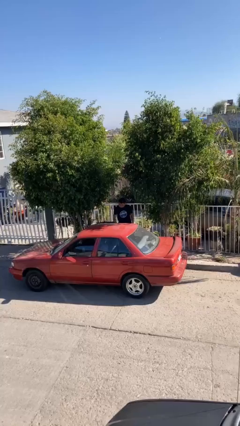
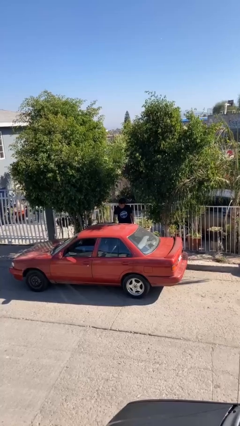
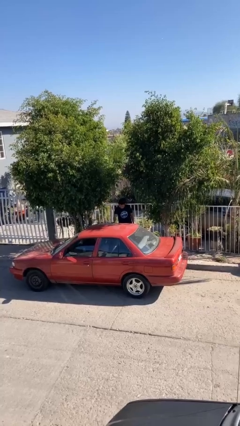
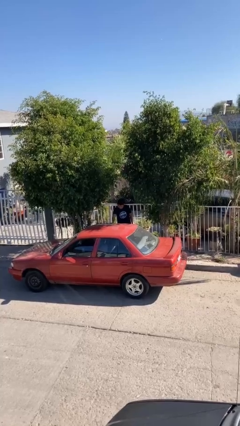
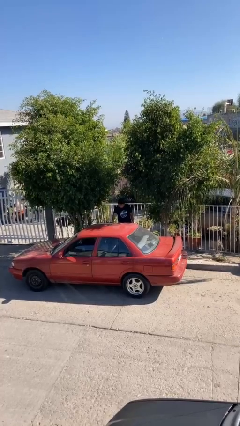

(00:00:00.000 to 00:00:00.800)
person closes car door

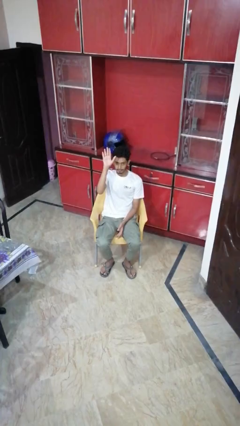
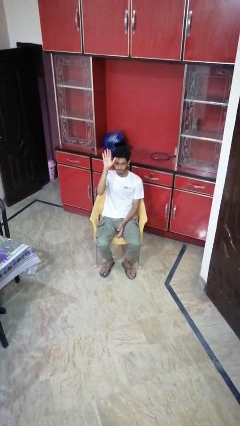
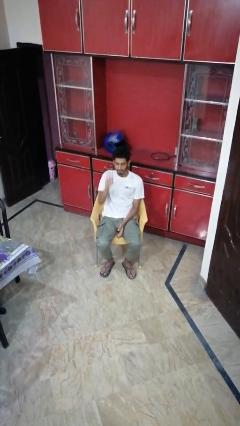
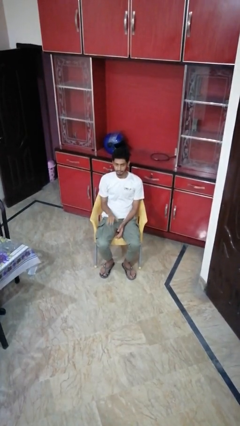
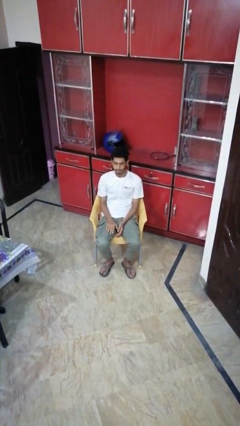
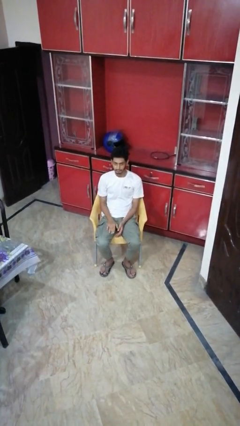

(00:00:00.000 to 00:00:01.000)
person gestures lower hand

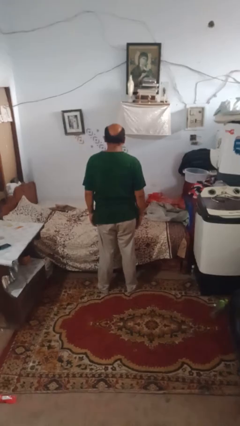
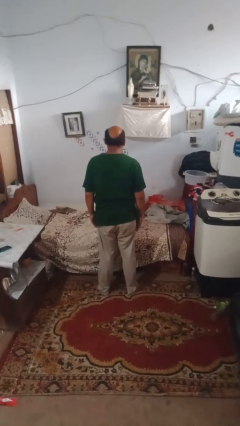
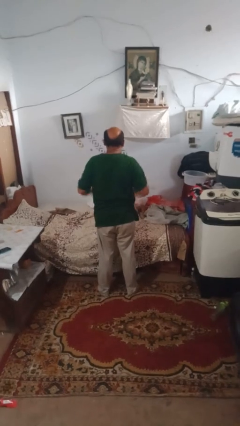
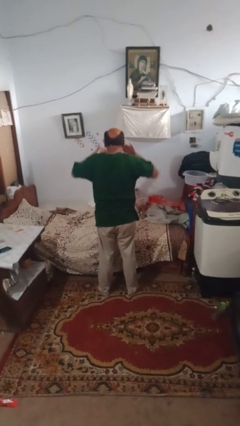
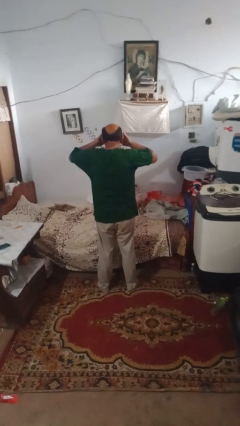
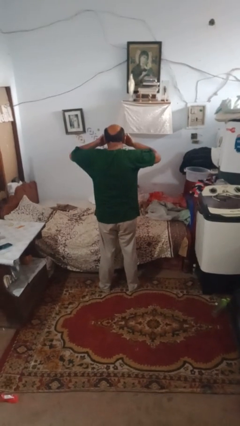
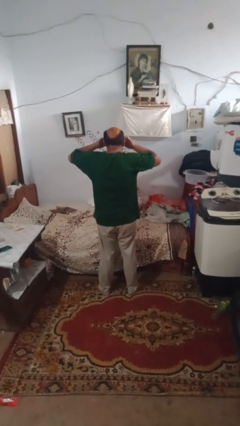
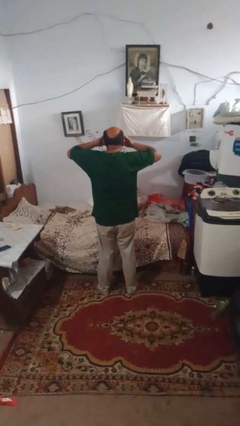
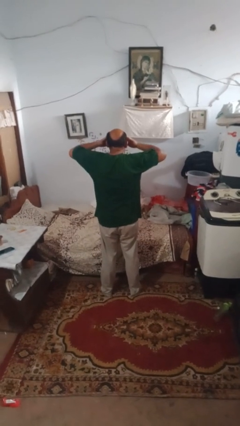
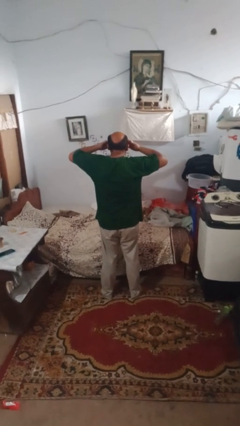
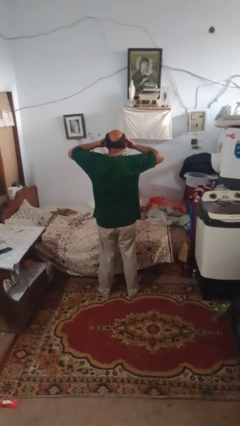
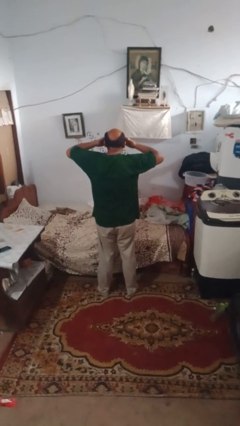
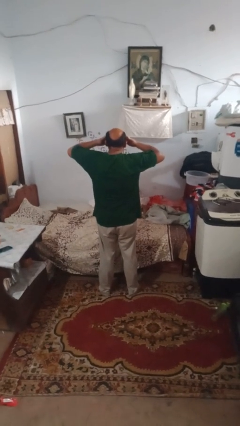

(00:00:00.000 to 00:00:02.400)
person rubs eyes

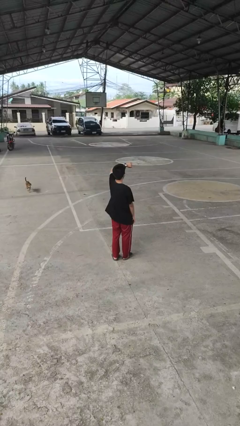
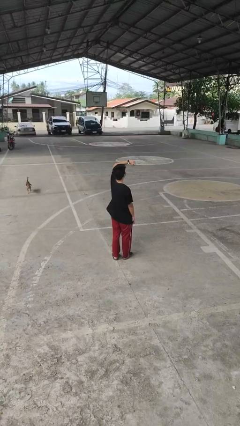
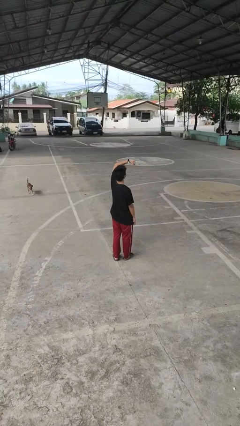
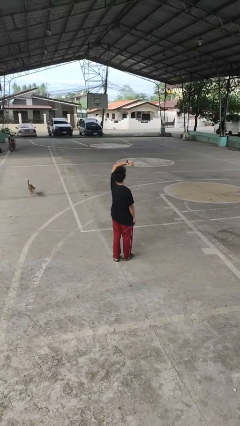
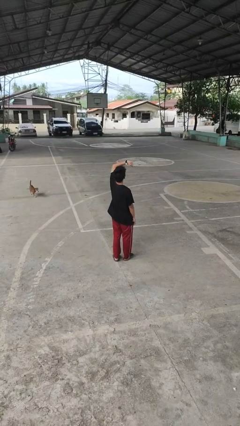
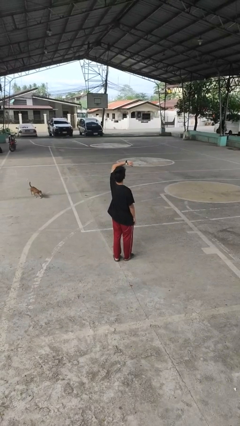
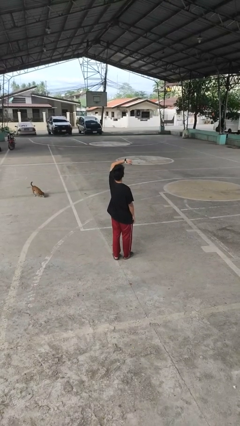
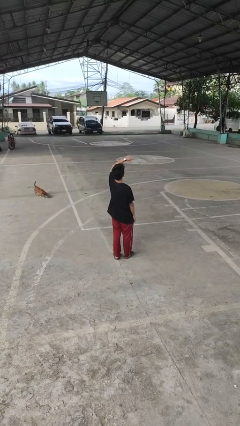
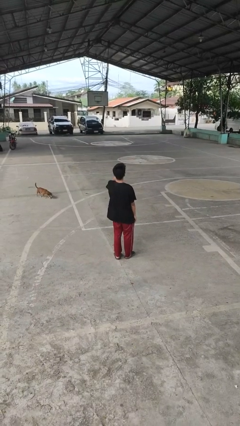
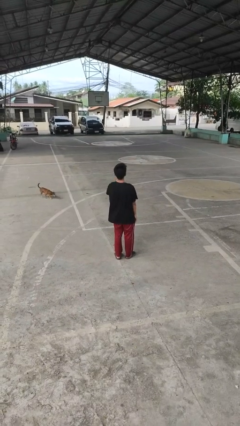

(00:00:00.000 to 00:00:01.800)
person looks at wristwatch

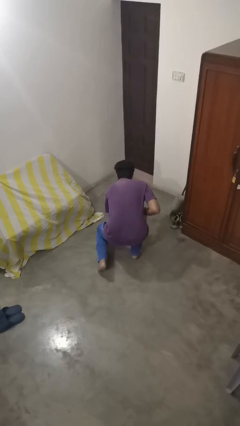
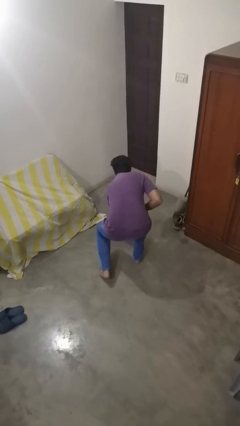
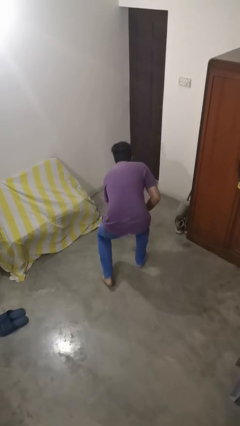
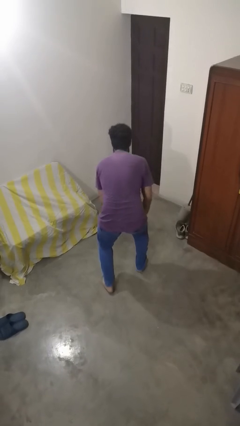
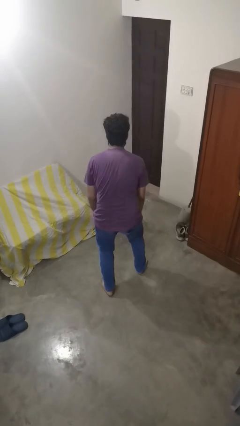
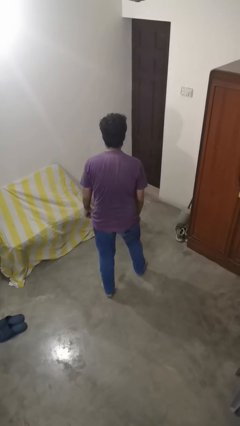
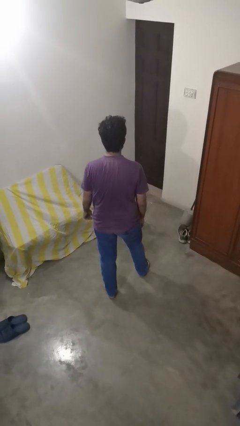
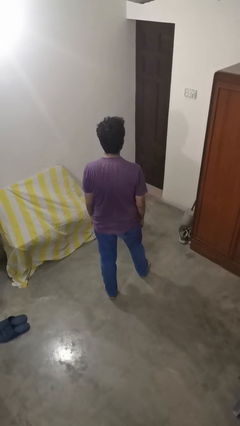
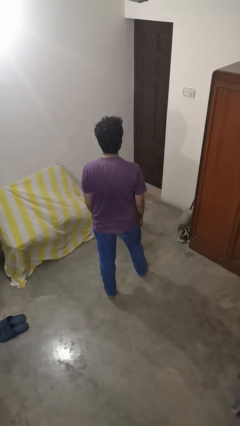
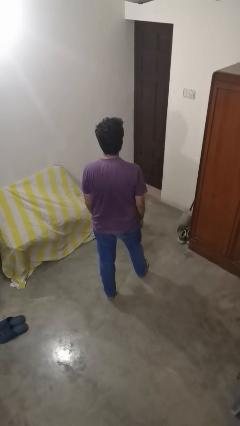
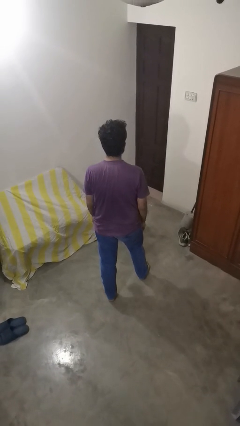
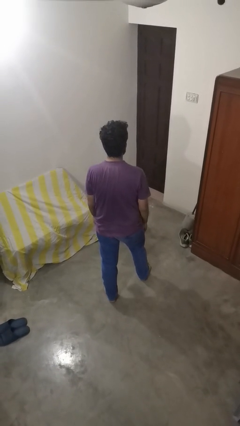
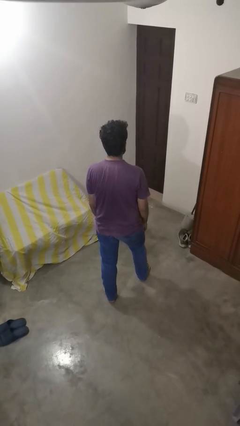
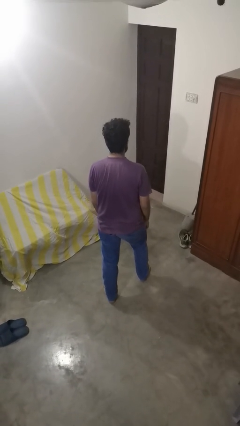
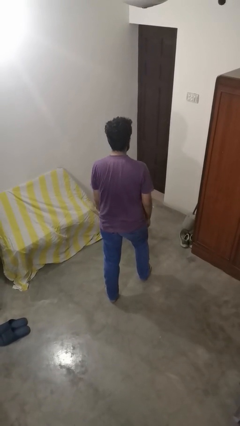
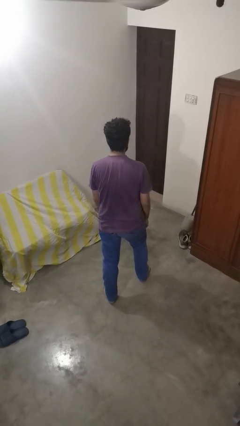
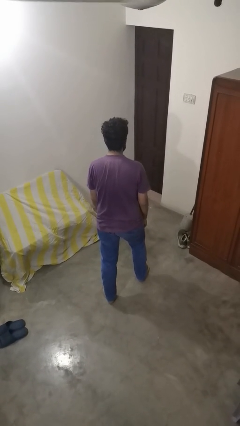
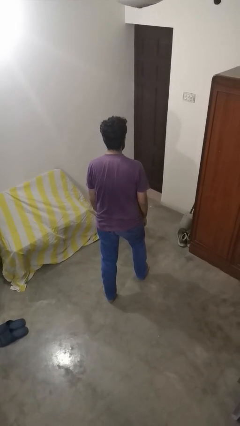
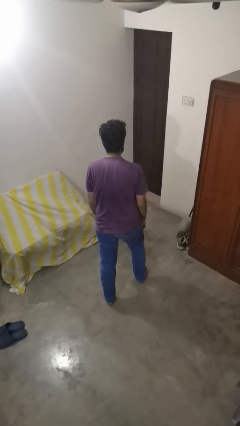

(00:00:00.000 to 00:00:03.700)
person stands up from floor

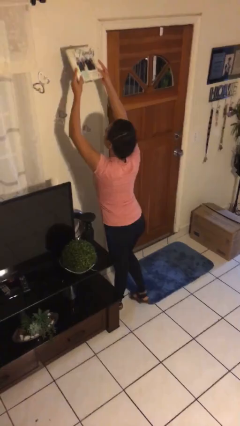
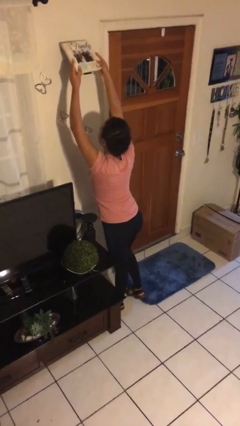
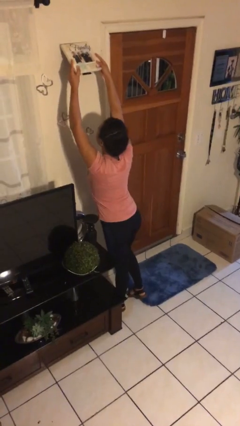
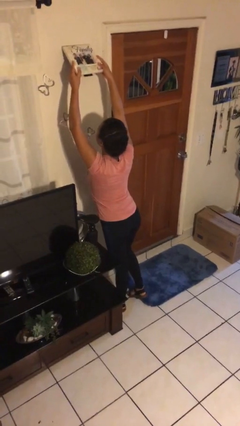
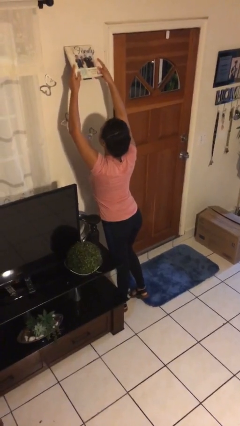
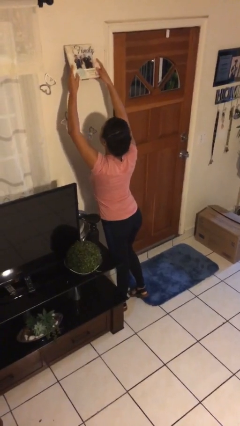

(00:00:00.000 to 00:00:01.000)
person puts up picture frame

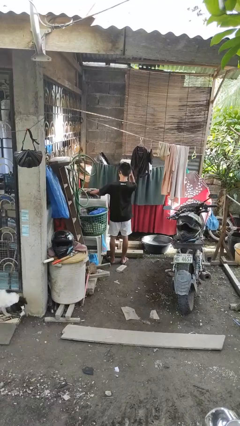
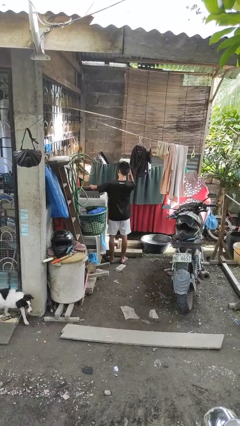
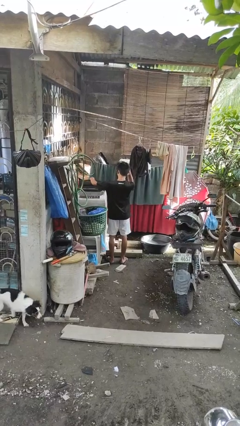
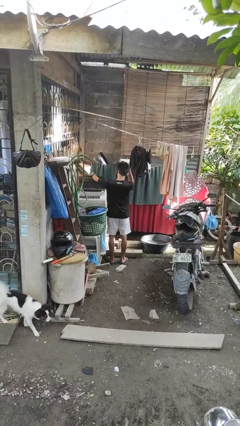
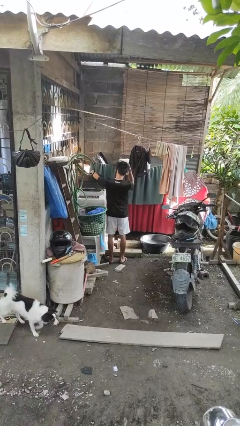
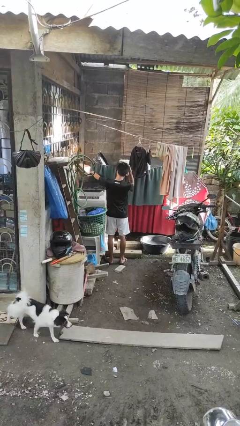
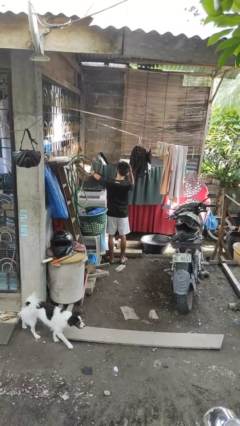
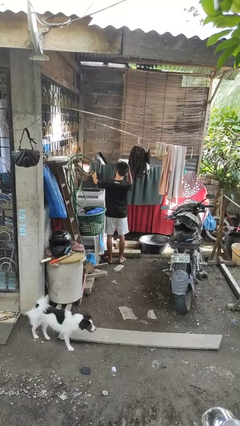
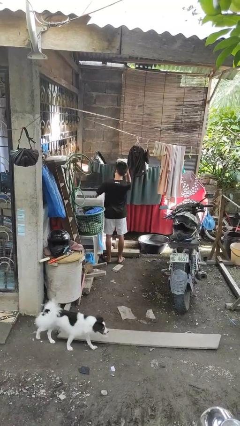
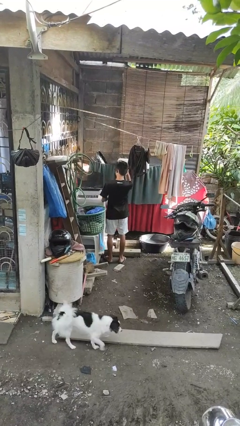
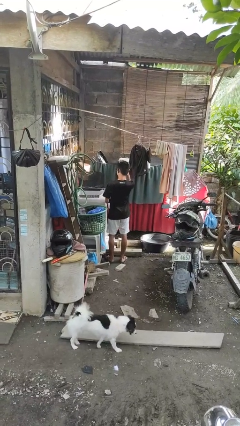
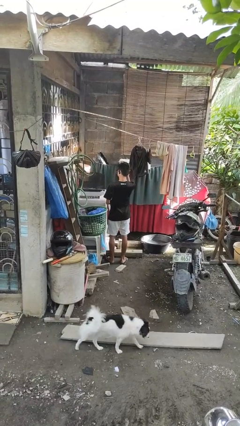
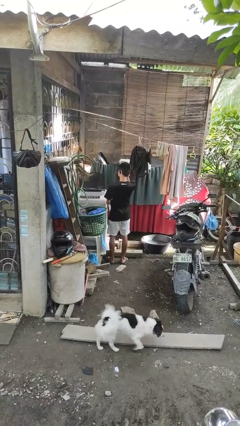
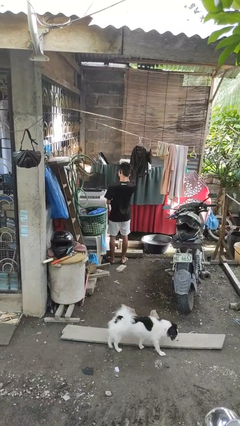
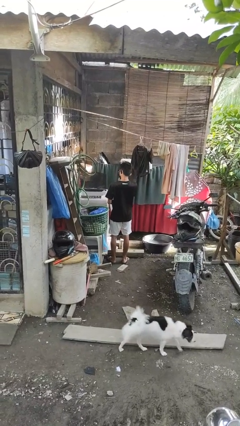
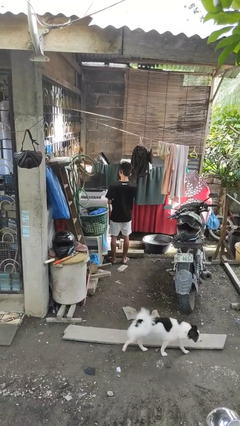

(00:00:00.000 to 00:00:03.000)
person opens clothes washer

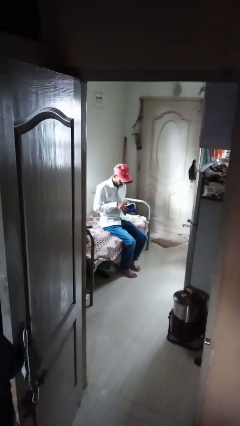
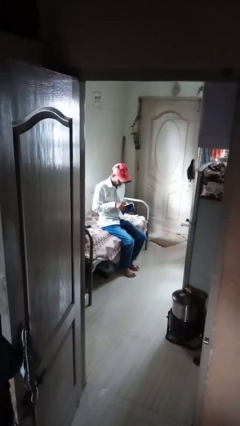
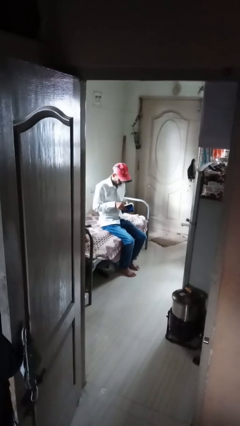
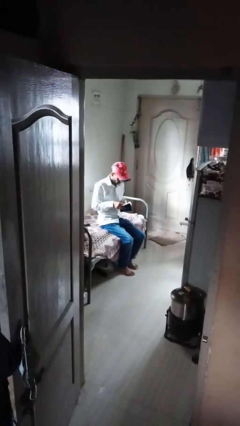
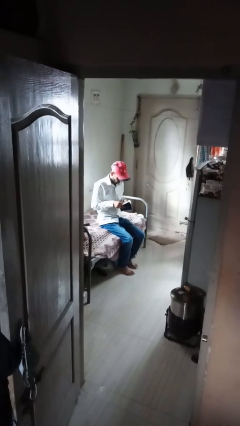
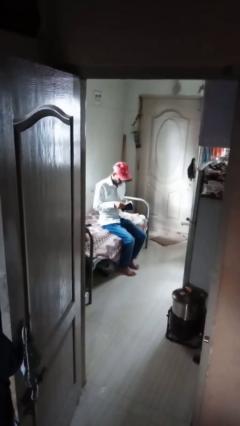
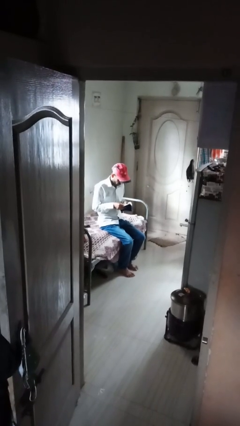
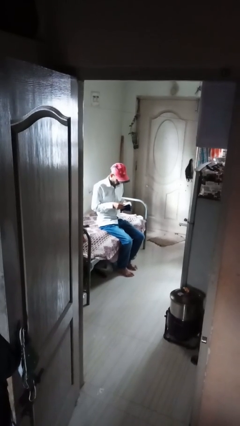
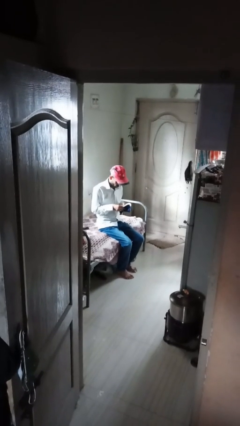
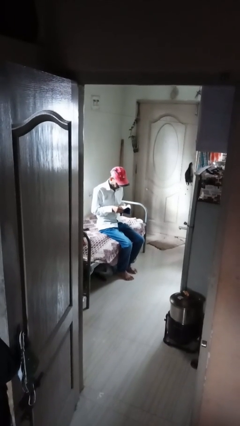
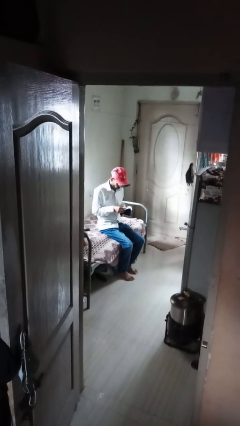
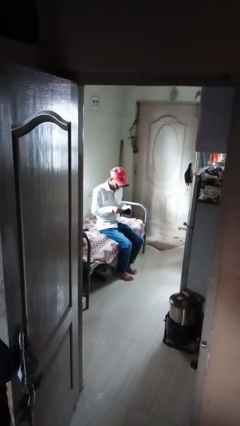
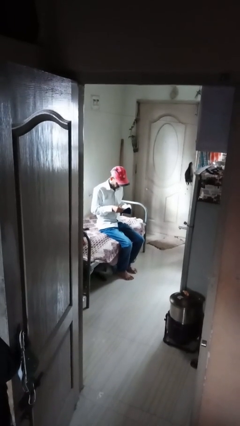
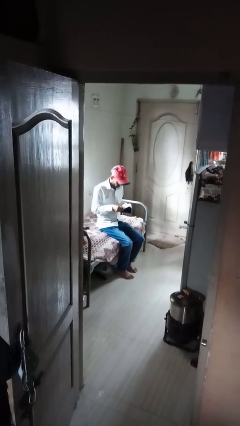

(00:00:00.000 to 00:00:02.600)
person searches in purse

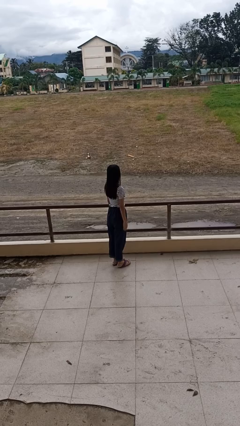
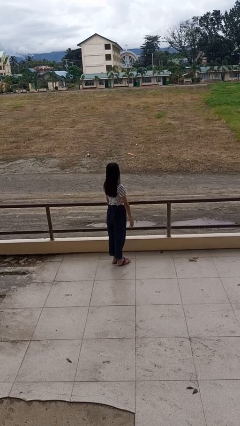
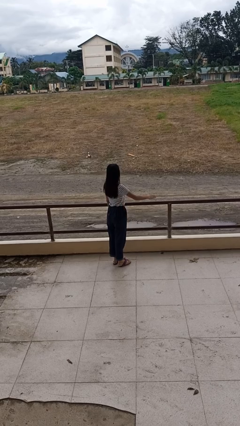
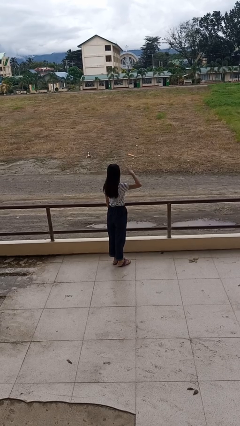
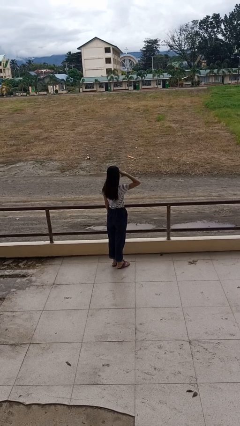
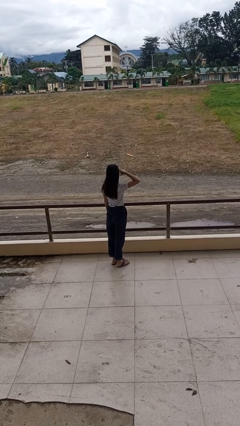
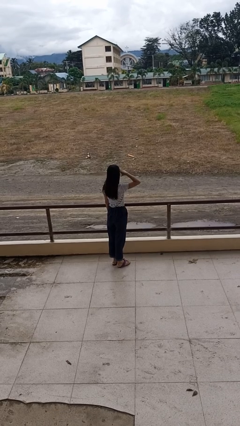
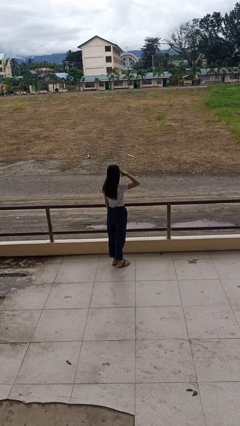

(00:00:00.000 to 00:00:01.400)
person salutes
